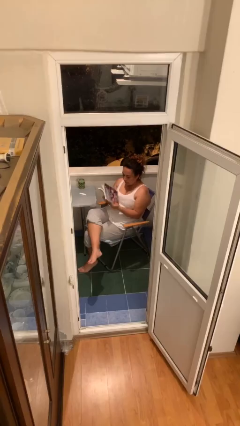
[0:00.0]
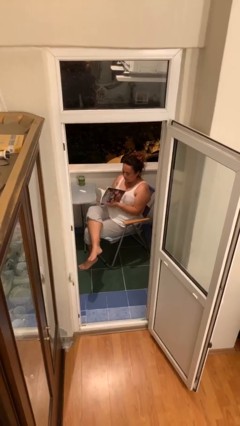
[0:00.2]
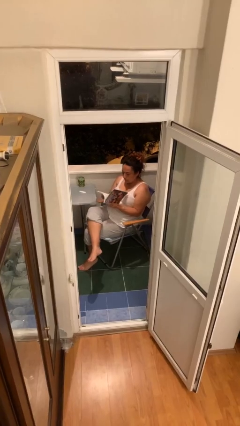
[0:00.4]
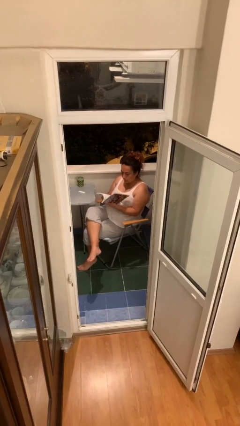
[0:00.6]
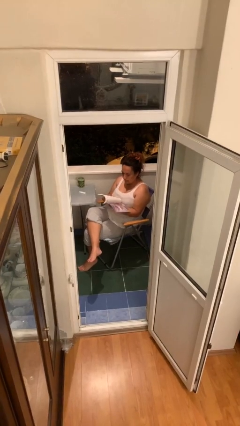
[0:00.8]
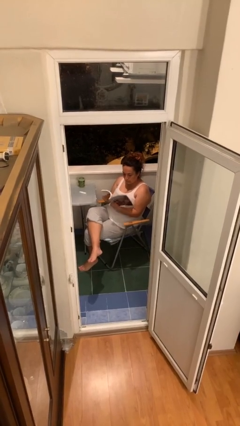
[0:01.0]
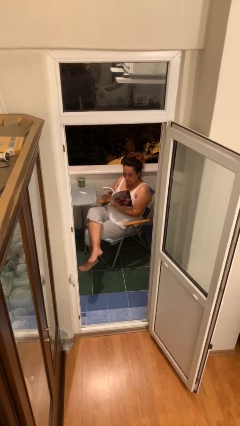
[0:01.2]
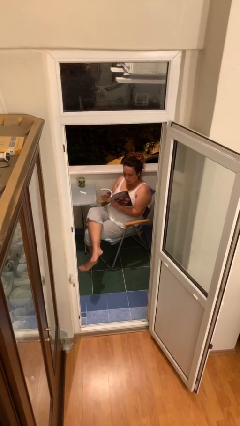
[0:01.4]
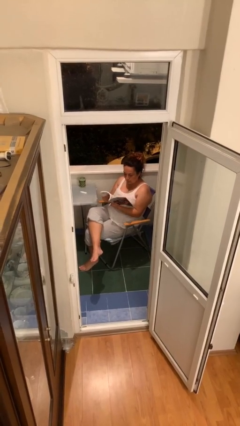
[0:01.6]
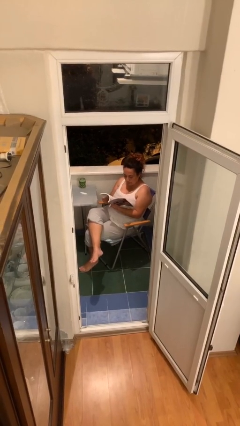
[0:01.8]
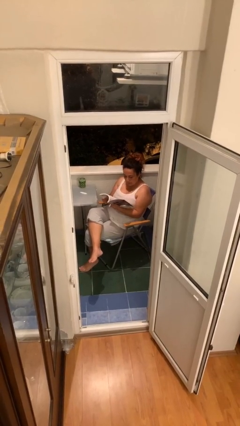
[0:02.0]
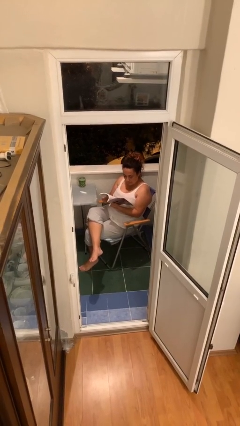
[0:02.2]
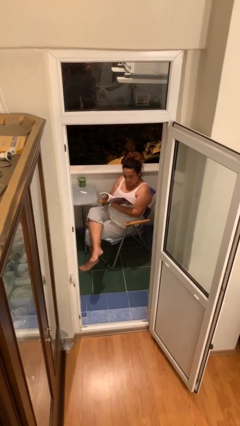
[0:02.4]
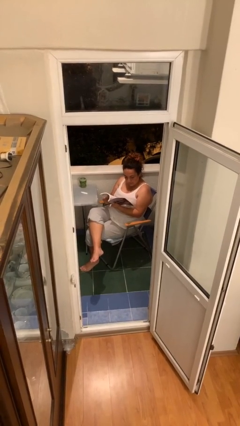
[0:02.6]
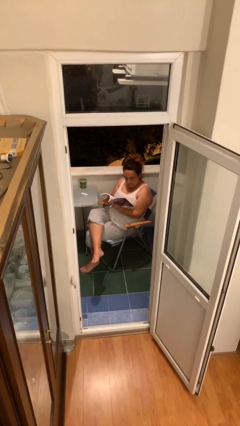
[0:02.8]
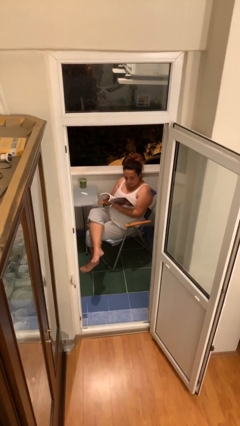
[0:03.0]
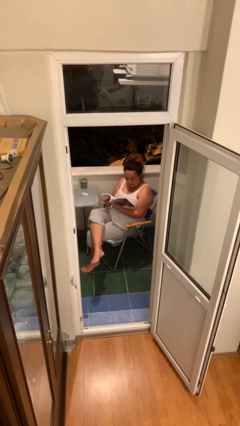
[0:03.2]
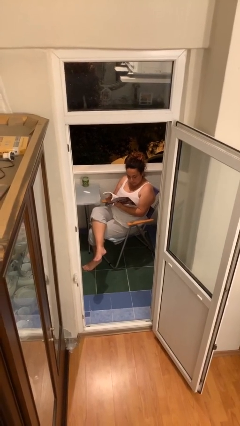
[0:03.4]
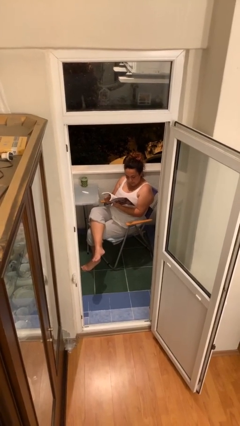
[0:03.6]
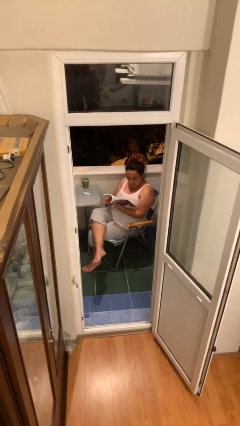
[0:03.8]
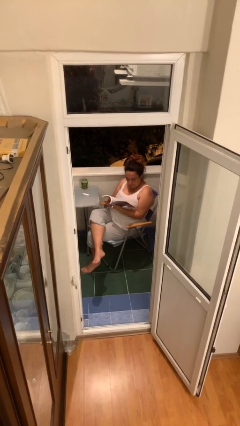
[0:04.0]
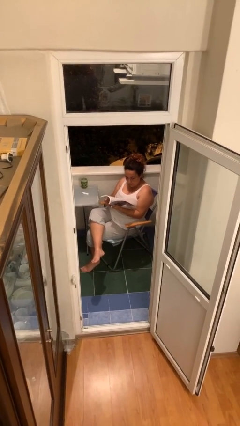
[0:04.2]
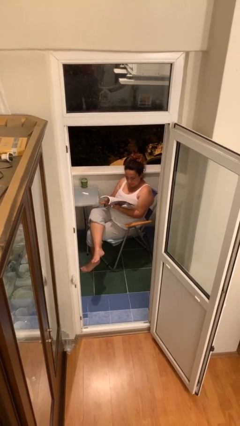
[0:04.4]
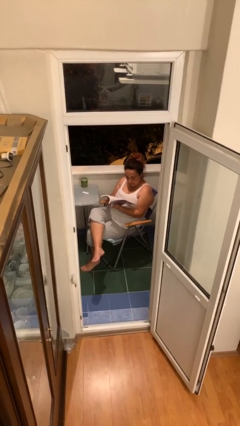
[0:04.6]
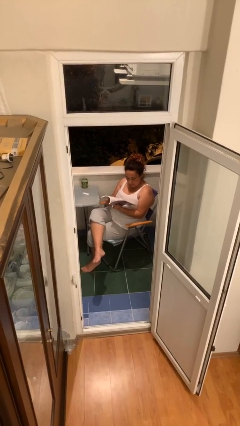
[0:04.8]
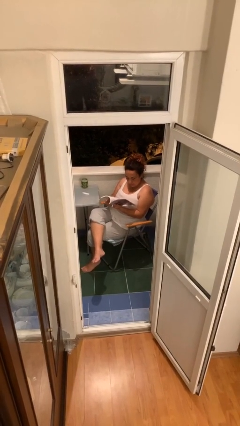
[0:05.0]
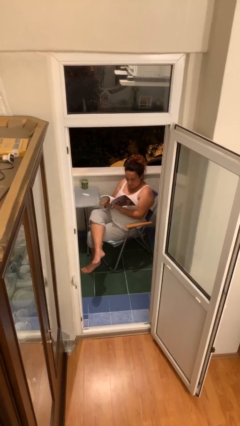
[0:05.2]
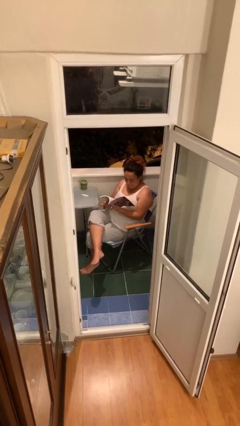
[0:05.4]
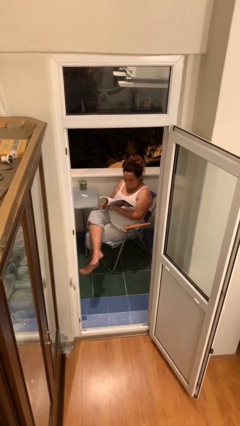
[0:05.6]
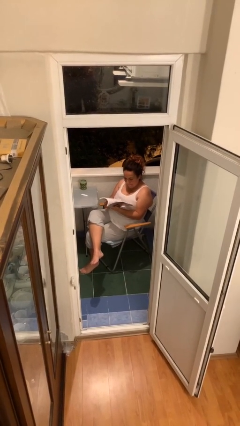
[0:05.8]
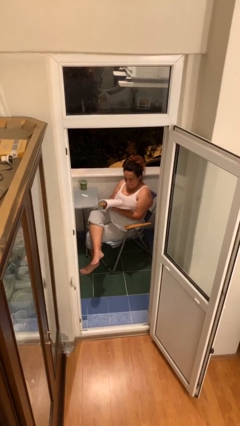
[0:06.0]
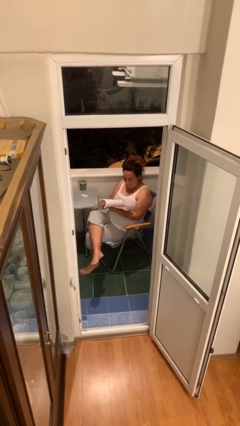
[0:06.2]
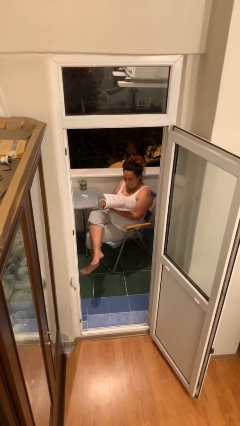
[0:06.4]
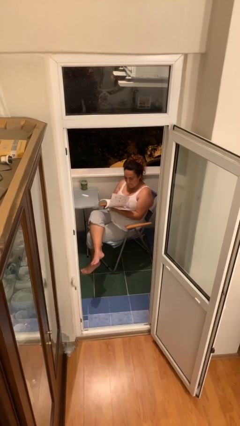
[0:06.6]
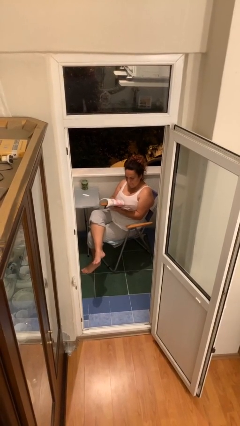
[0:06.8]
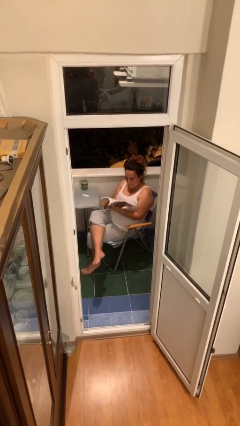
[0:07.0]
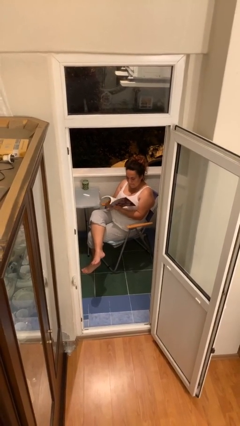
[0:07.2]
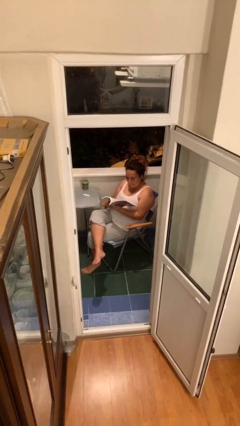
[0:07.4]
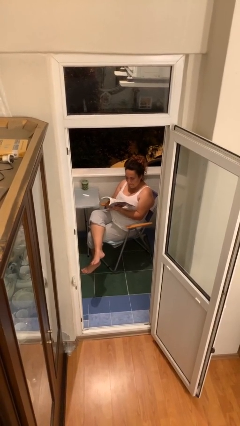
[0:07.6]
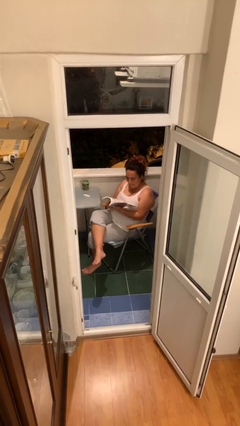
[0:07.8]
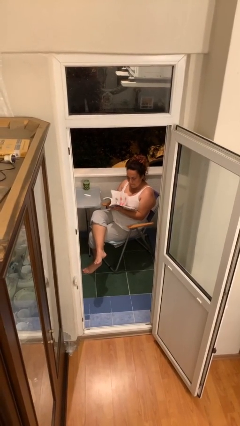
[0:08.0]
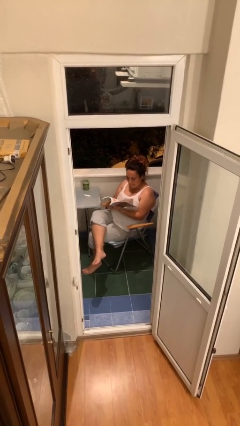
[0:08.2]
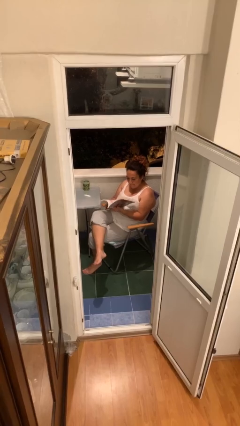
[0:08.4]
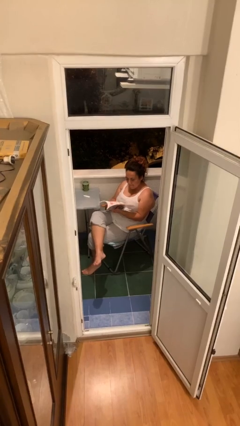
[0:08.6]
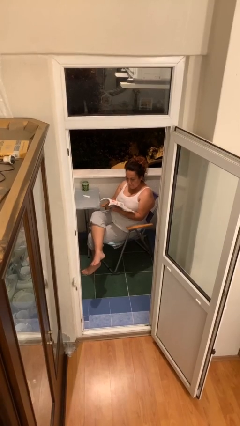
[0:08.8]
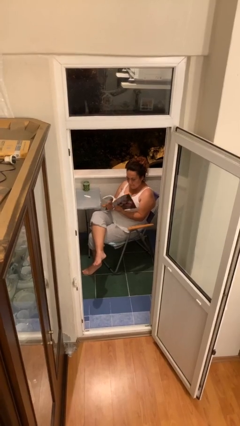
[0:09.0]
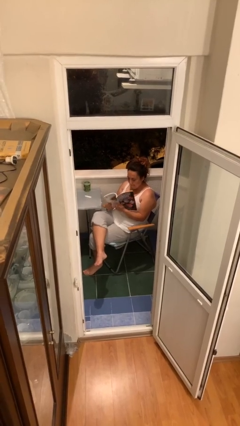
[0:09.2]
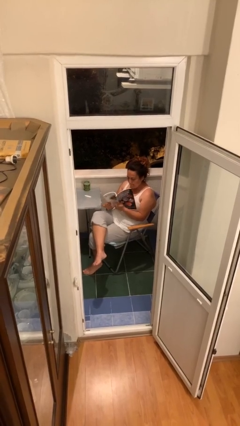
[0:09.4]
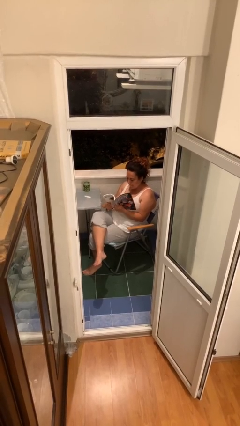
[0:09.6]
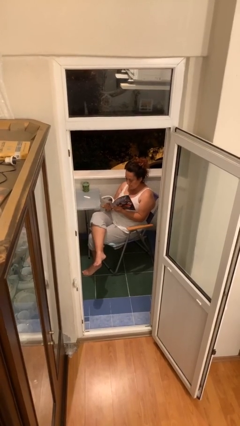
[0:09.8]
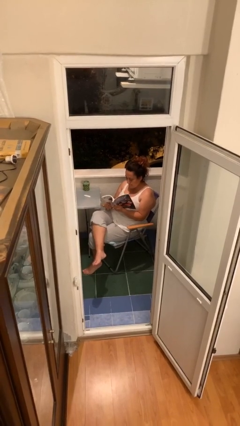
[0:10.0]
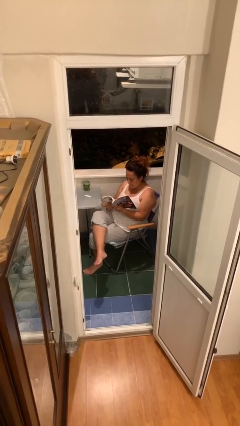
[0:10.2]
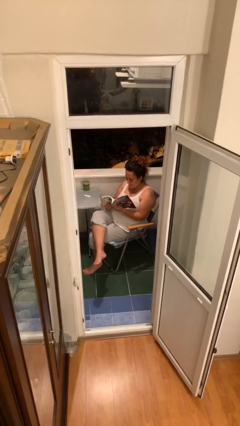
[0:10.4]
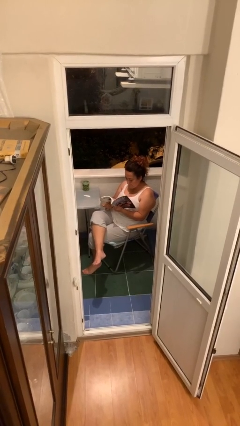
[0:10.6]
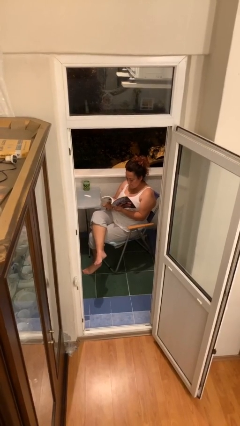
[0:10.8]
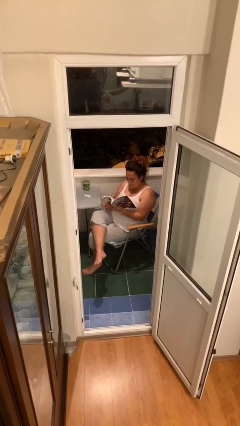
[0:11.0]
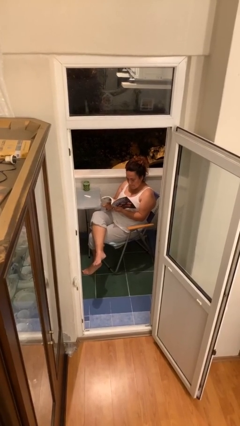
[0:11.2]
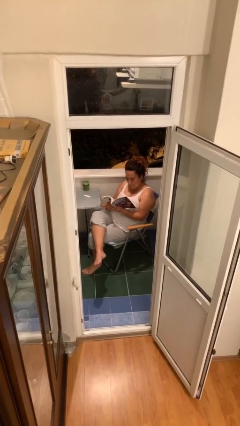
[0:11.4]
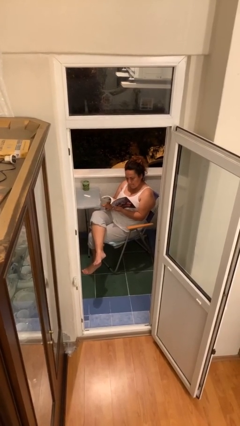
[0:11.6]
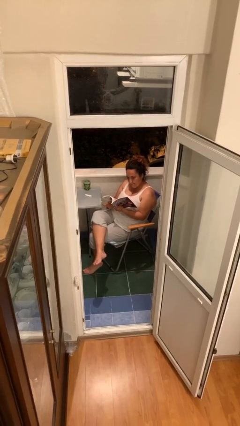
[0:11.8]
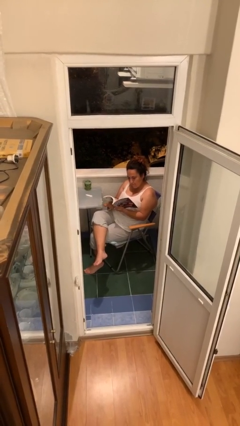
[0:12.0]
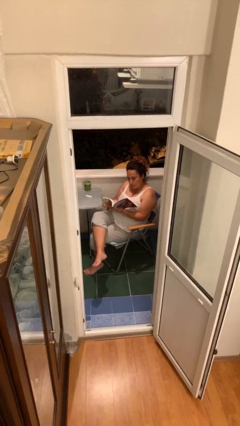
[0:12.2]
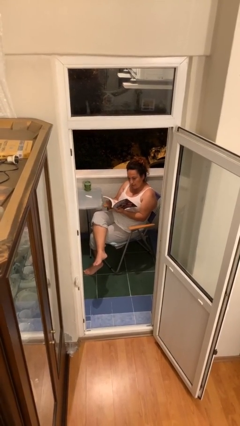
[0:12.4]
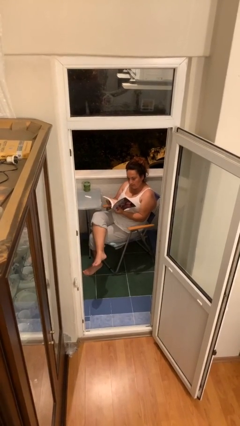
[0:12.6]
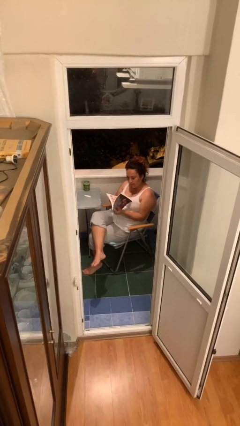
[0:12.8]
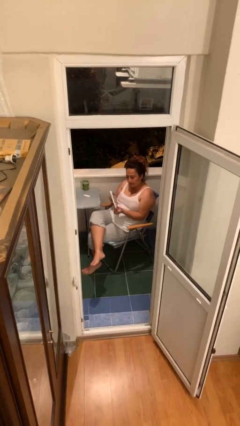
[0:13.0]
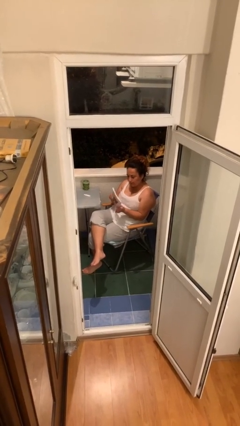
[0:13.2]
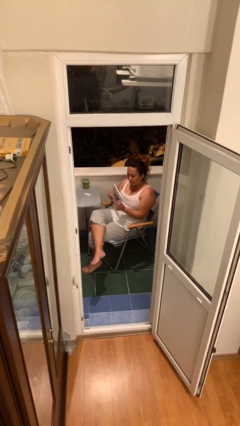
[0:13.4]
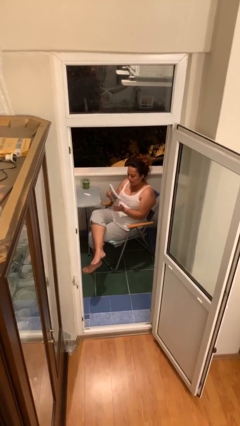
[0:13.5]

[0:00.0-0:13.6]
person reads document

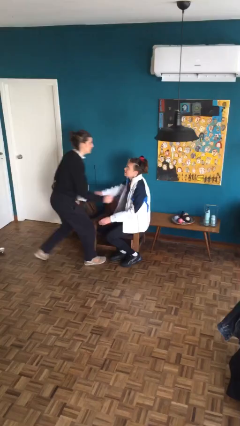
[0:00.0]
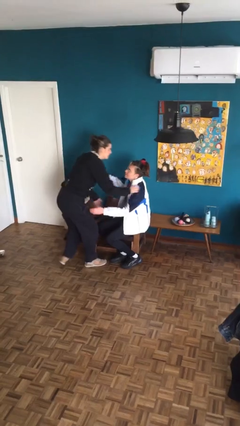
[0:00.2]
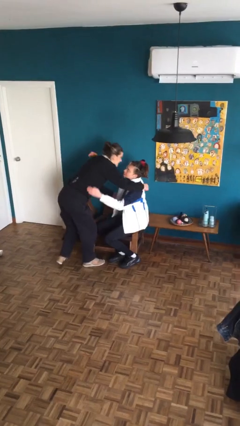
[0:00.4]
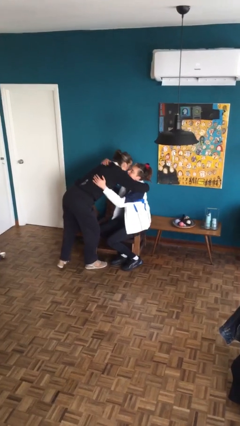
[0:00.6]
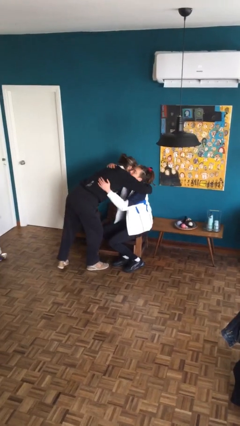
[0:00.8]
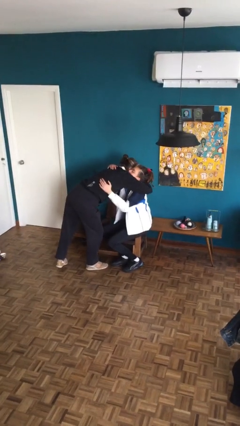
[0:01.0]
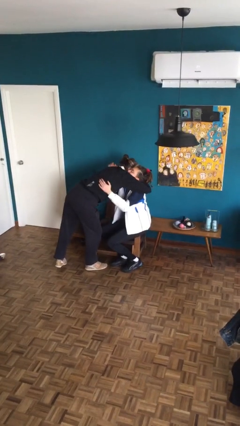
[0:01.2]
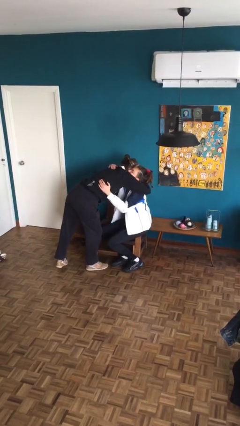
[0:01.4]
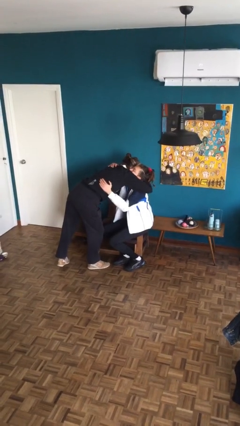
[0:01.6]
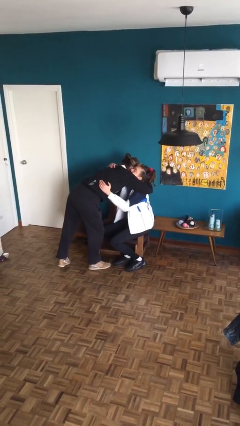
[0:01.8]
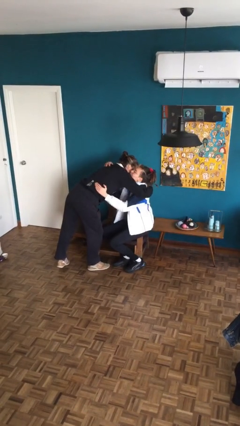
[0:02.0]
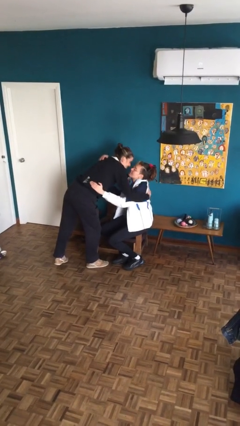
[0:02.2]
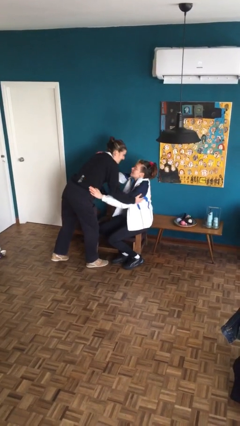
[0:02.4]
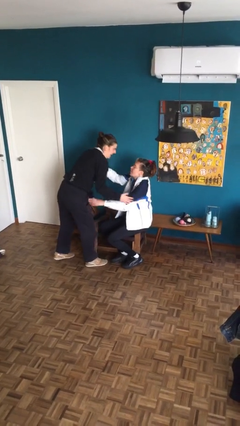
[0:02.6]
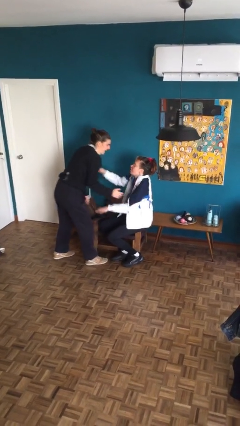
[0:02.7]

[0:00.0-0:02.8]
person embraces person

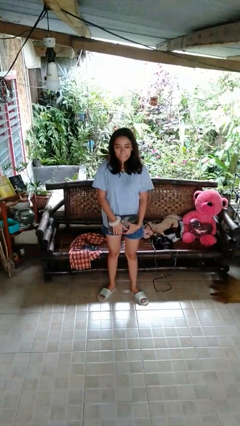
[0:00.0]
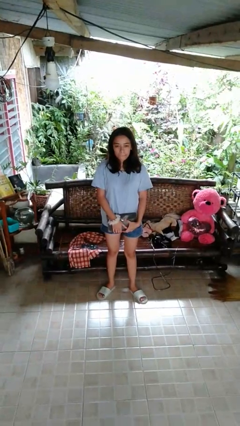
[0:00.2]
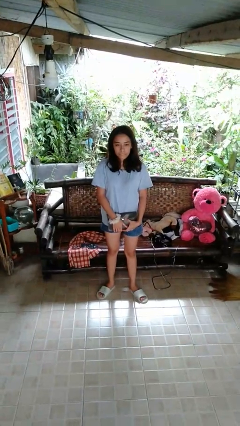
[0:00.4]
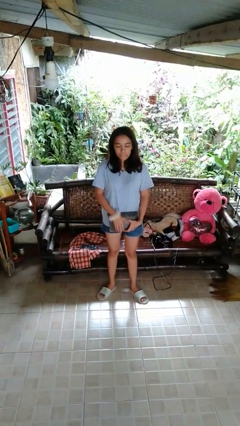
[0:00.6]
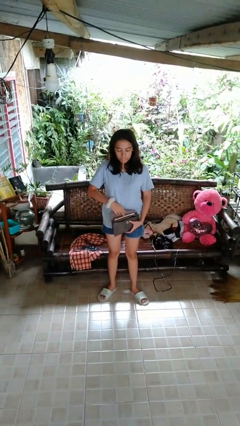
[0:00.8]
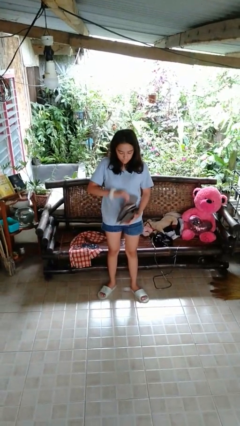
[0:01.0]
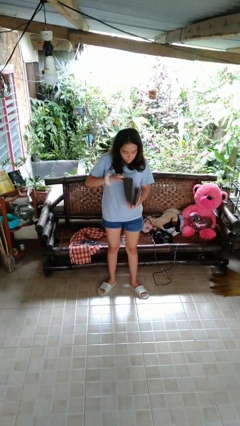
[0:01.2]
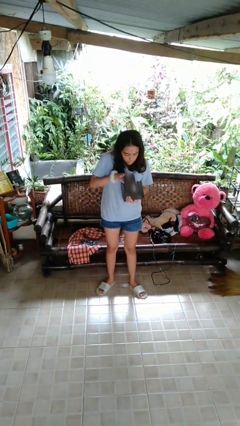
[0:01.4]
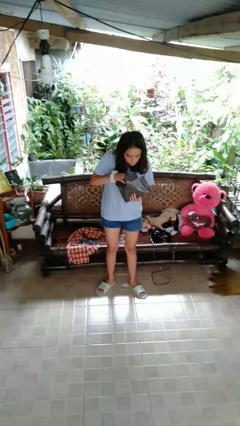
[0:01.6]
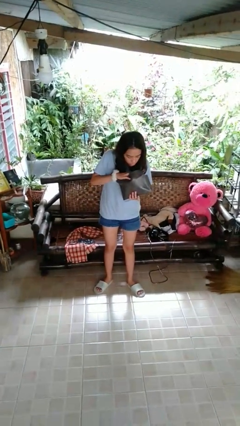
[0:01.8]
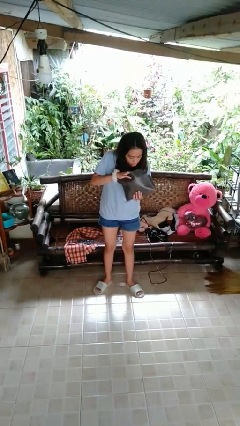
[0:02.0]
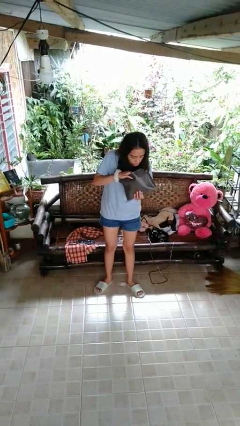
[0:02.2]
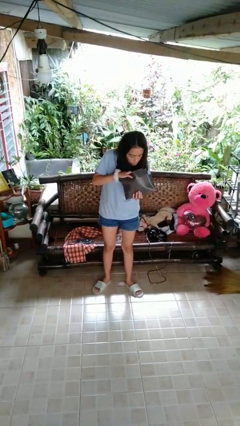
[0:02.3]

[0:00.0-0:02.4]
person searches in purse
